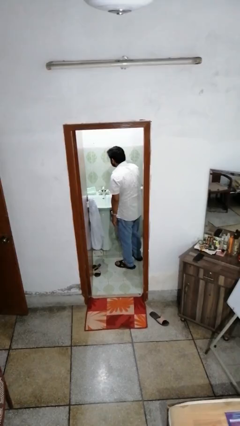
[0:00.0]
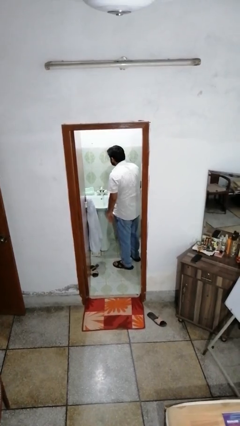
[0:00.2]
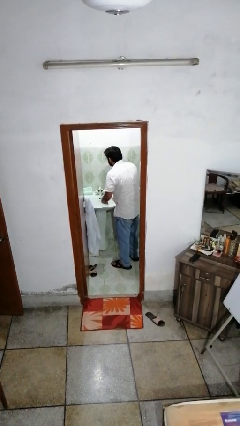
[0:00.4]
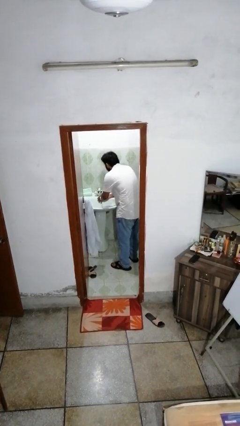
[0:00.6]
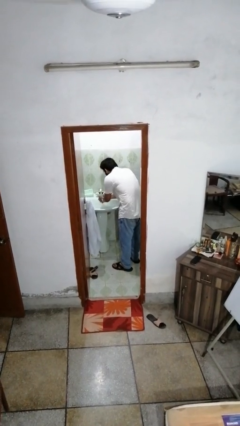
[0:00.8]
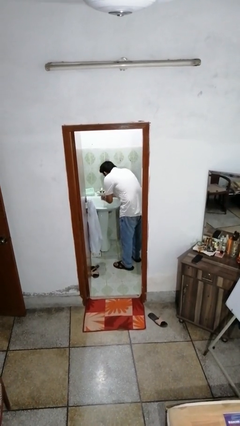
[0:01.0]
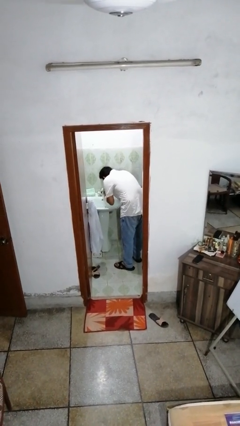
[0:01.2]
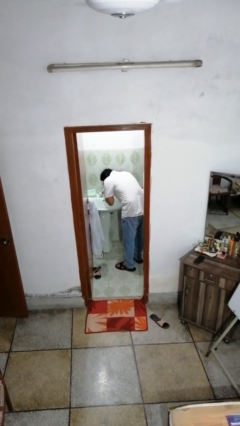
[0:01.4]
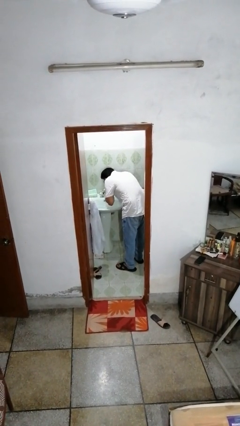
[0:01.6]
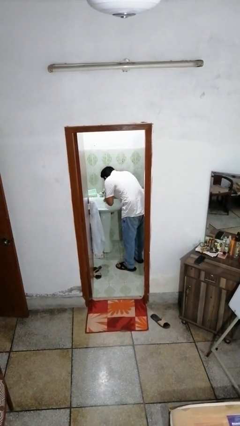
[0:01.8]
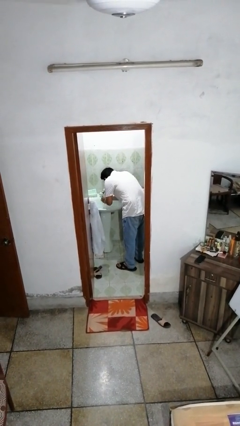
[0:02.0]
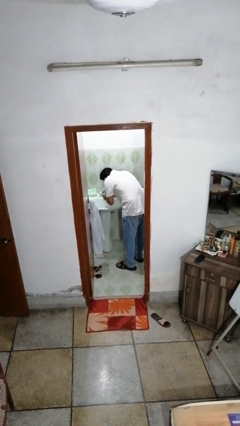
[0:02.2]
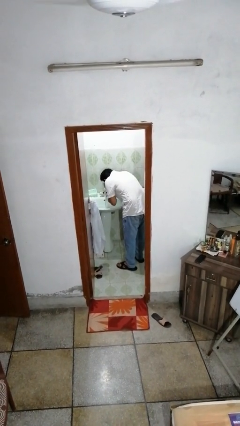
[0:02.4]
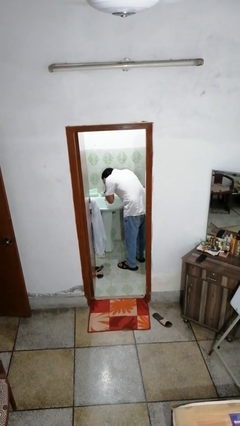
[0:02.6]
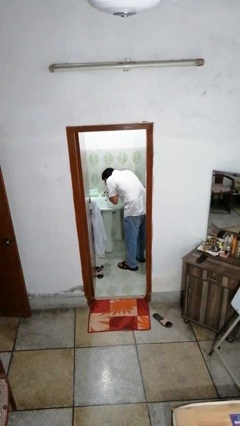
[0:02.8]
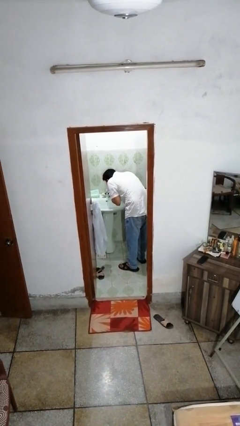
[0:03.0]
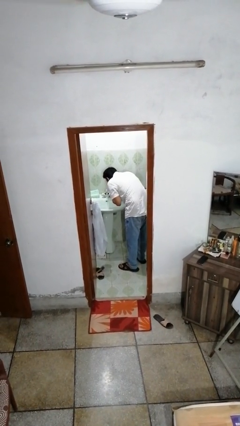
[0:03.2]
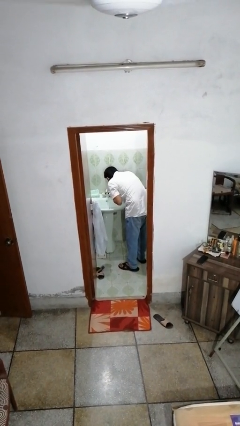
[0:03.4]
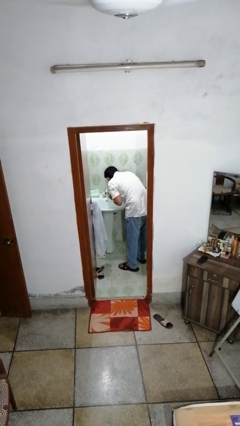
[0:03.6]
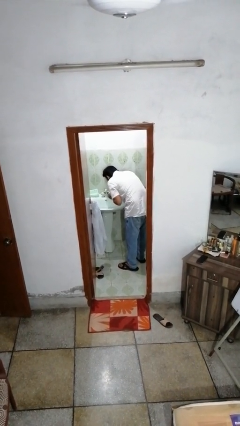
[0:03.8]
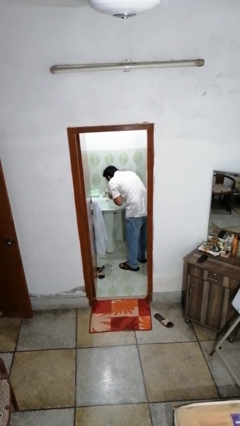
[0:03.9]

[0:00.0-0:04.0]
person washes face

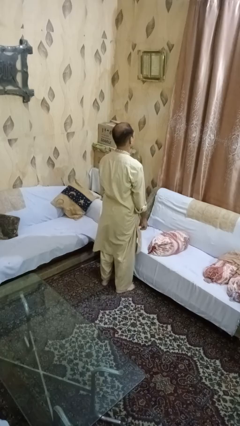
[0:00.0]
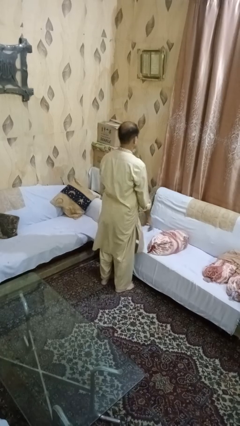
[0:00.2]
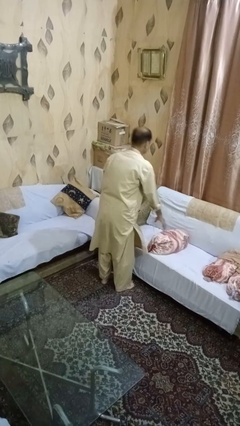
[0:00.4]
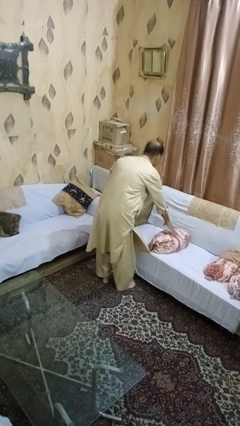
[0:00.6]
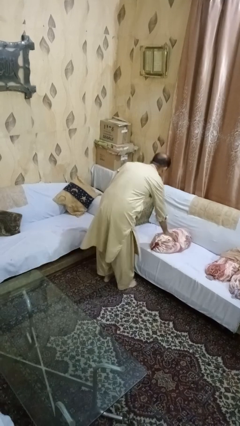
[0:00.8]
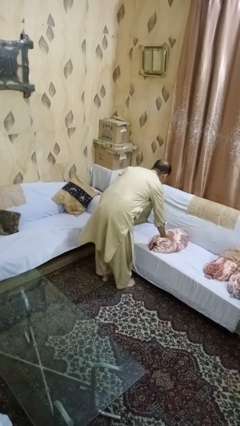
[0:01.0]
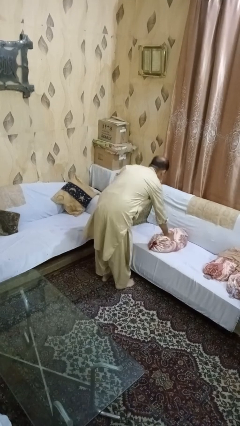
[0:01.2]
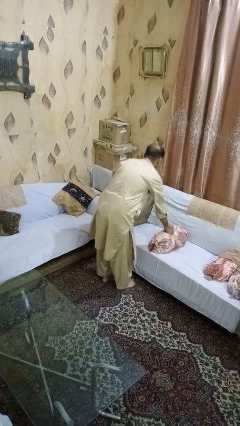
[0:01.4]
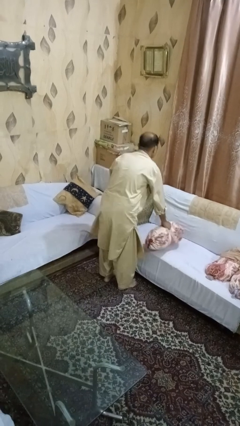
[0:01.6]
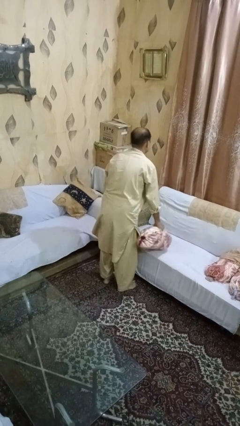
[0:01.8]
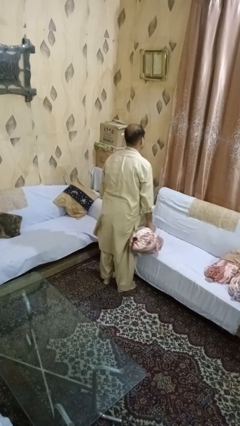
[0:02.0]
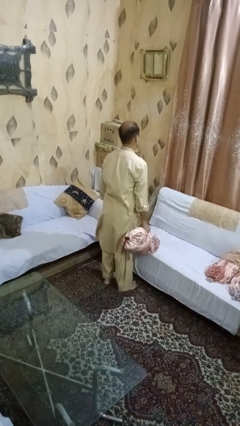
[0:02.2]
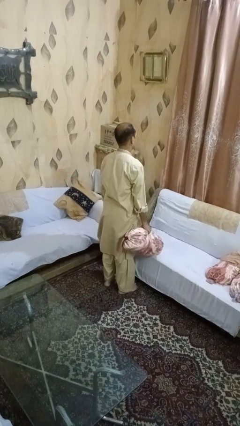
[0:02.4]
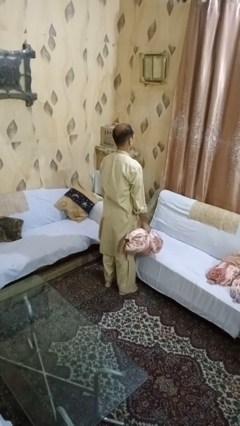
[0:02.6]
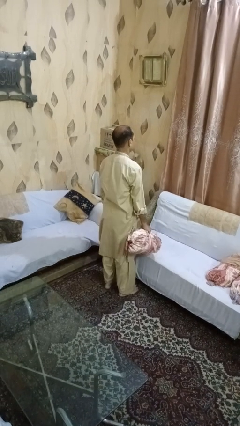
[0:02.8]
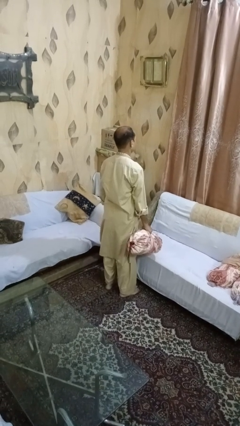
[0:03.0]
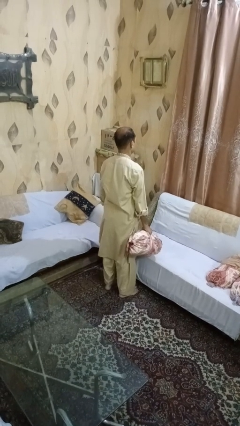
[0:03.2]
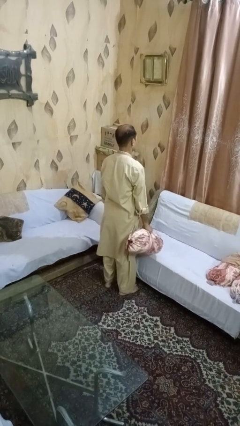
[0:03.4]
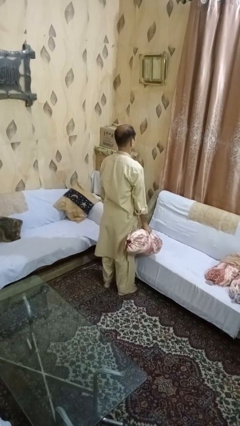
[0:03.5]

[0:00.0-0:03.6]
person picks up object from couch

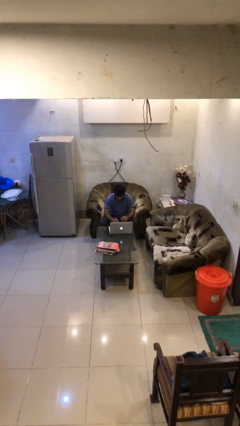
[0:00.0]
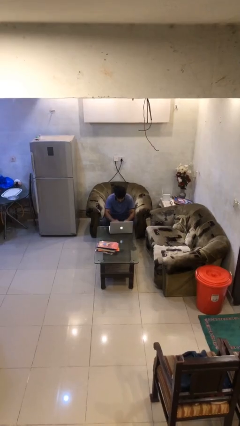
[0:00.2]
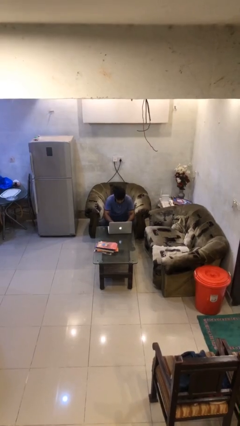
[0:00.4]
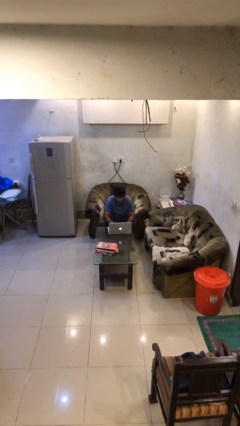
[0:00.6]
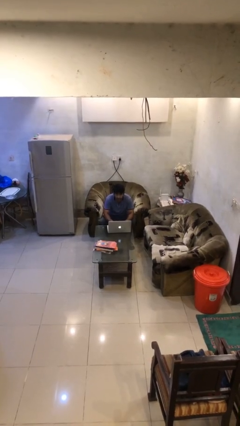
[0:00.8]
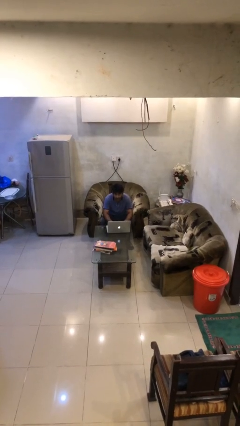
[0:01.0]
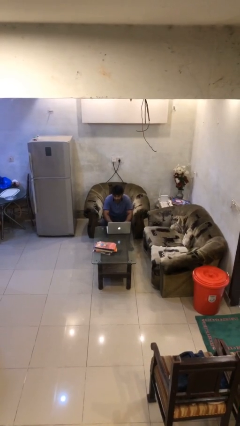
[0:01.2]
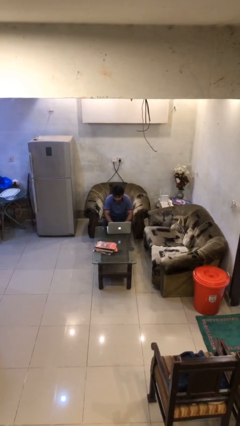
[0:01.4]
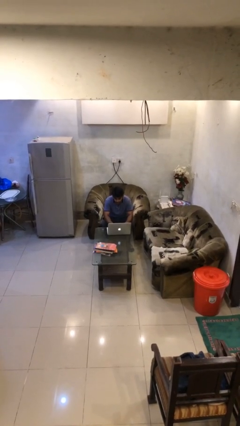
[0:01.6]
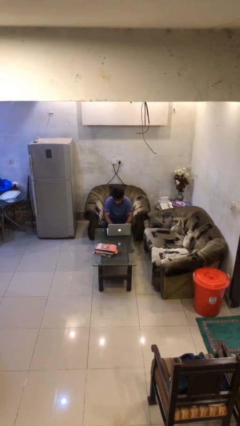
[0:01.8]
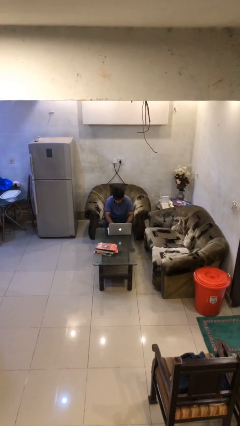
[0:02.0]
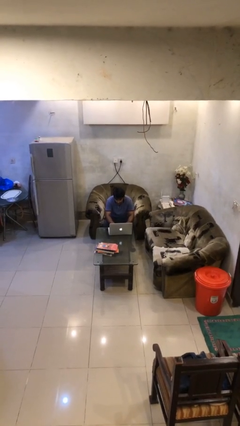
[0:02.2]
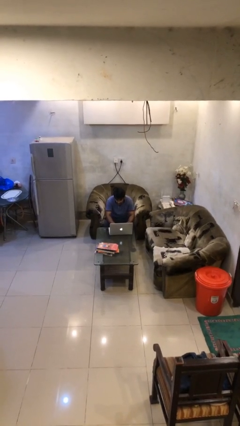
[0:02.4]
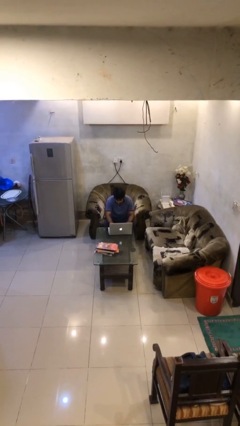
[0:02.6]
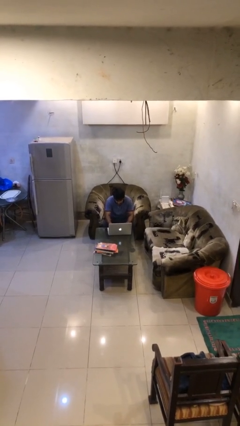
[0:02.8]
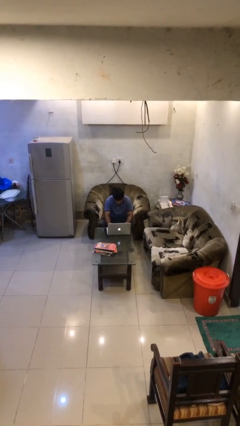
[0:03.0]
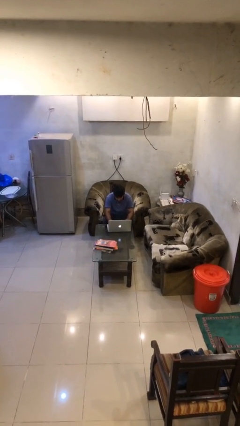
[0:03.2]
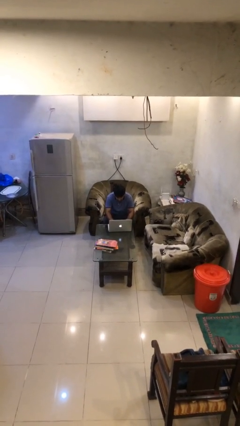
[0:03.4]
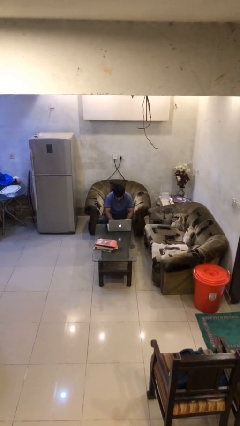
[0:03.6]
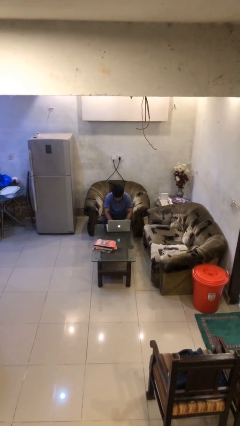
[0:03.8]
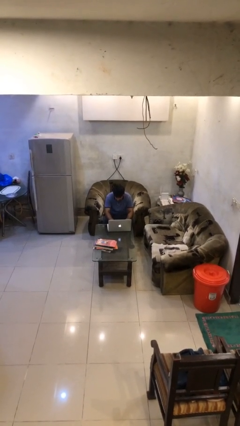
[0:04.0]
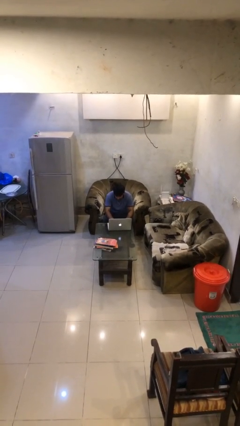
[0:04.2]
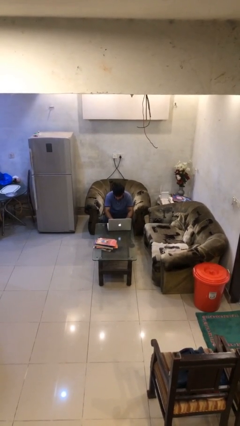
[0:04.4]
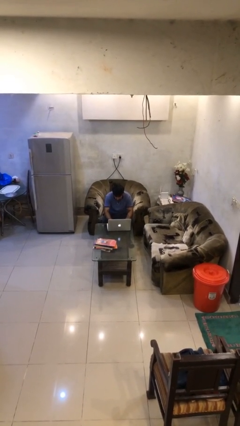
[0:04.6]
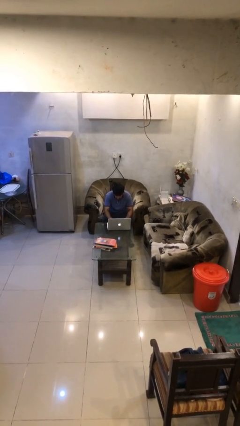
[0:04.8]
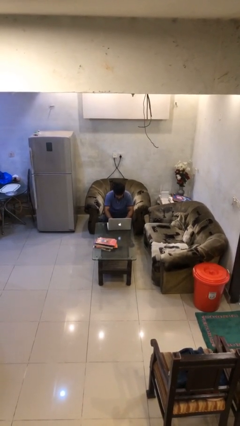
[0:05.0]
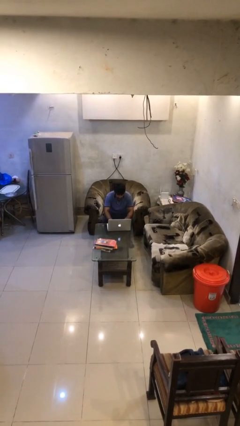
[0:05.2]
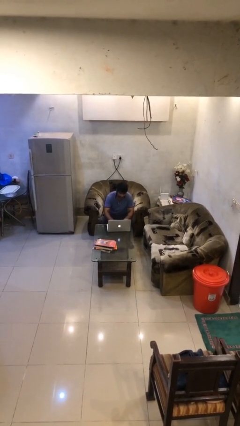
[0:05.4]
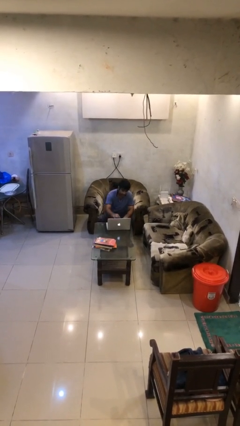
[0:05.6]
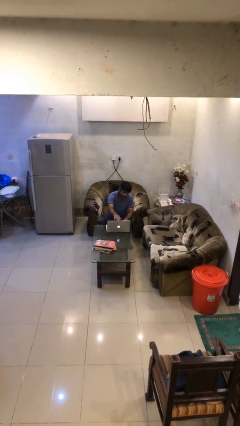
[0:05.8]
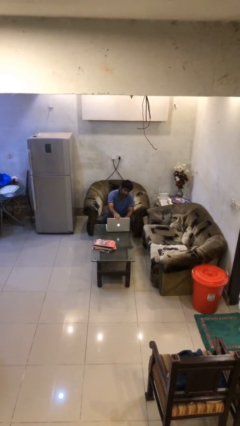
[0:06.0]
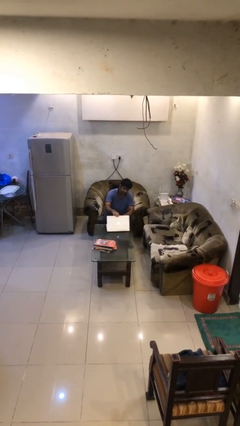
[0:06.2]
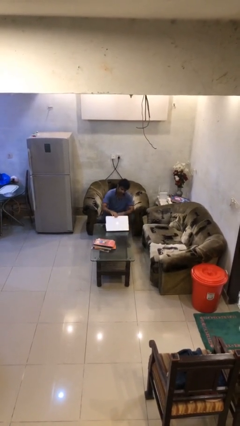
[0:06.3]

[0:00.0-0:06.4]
person interacts with laptop

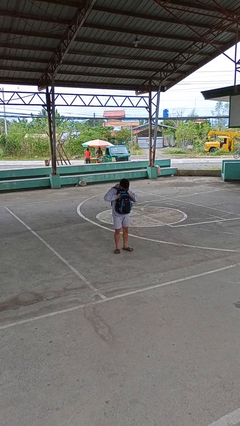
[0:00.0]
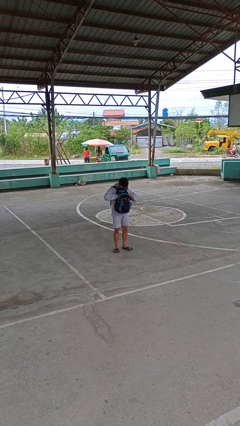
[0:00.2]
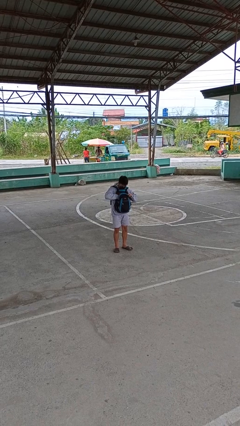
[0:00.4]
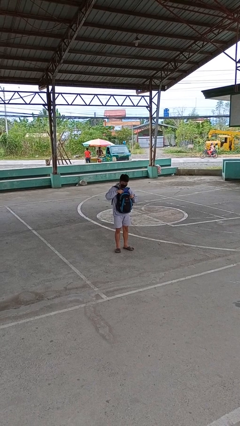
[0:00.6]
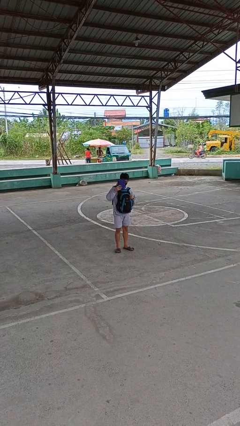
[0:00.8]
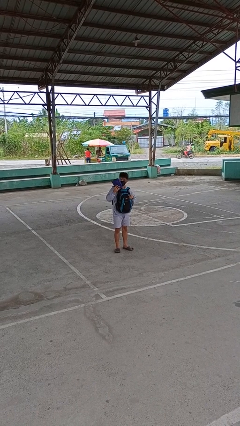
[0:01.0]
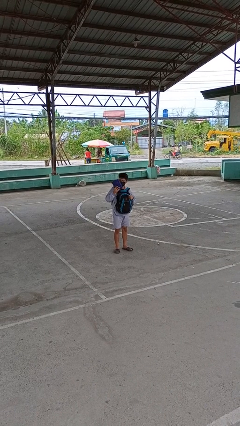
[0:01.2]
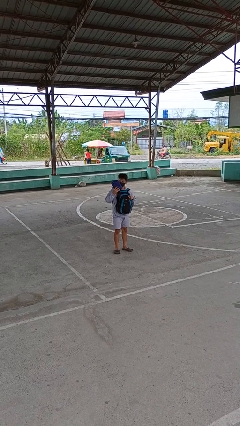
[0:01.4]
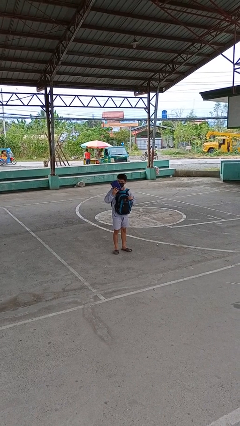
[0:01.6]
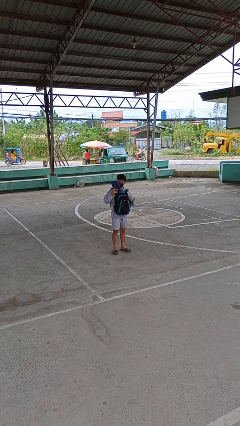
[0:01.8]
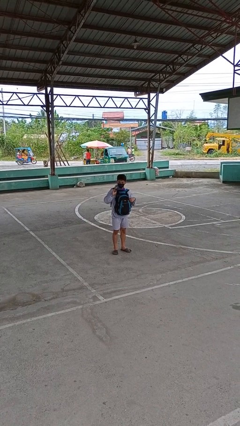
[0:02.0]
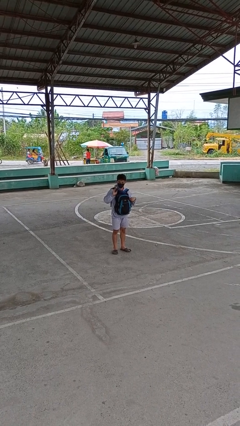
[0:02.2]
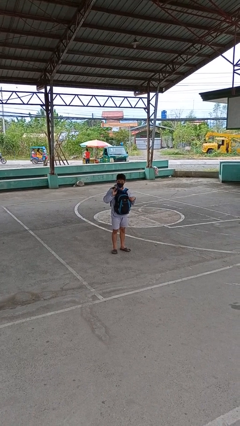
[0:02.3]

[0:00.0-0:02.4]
person takes object from backpack

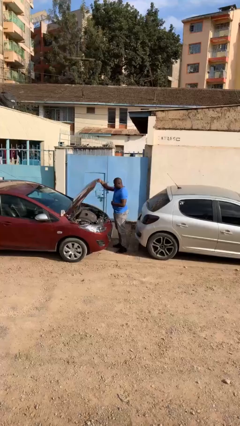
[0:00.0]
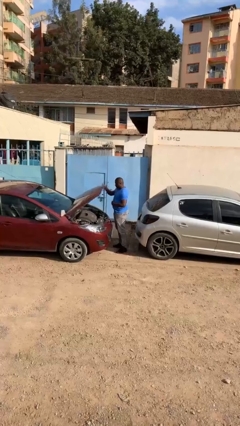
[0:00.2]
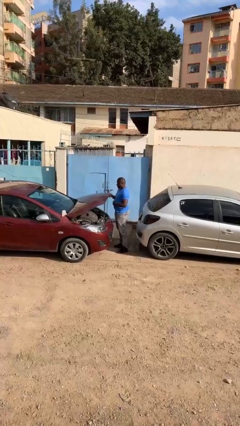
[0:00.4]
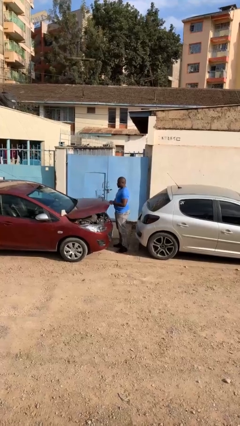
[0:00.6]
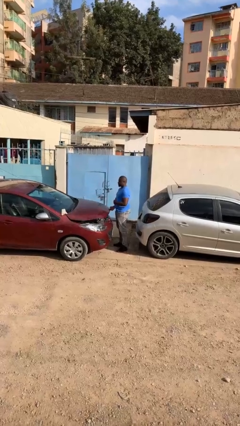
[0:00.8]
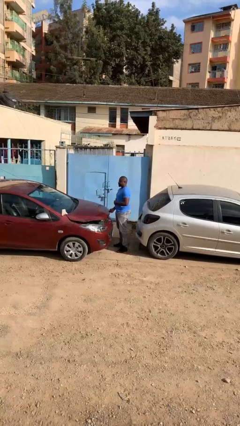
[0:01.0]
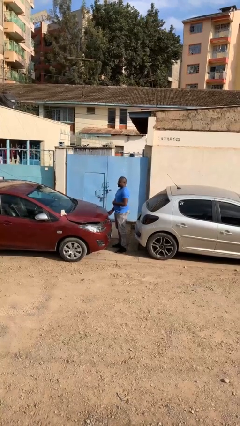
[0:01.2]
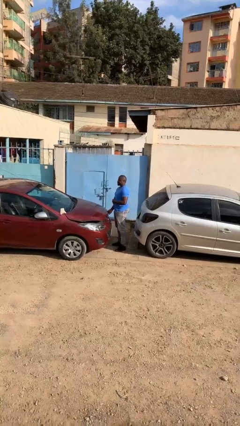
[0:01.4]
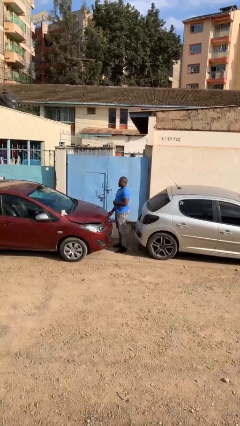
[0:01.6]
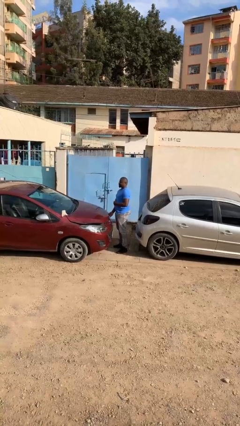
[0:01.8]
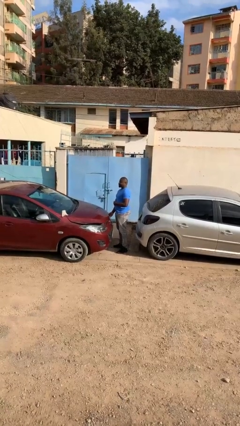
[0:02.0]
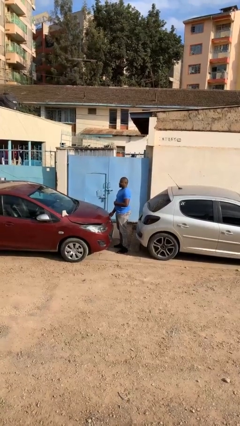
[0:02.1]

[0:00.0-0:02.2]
person closes car hood
